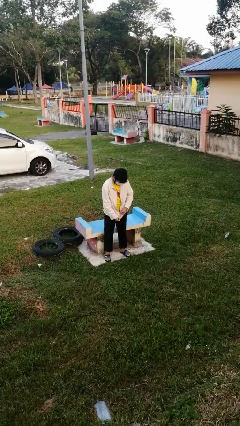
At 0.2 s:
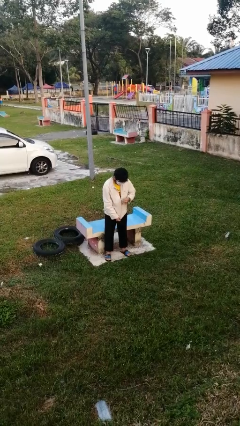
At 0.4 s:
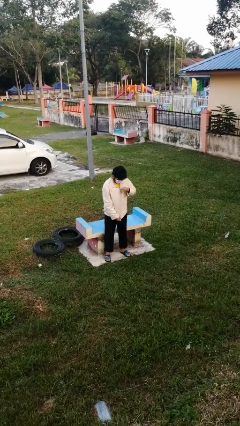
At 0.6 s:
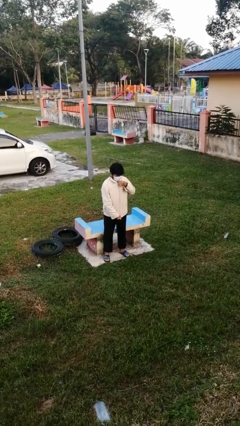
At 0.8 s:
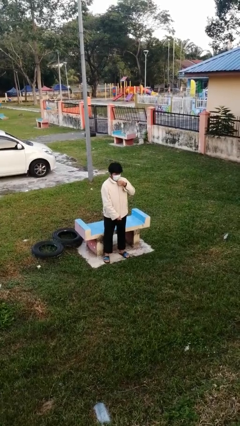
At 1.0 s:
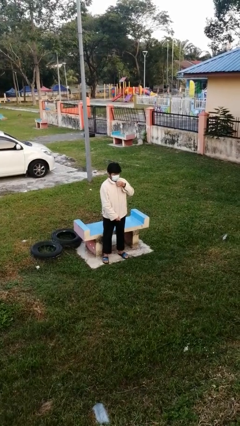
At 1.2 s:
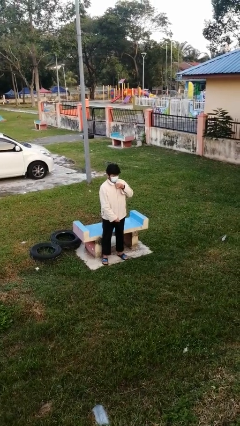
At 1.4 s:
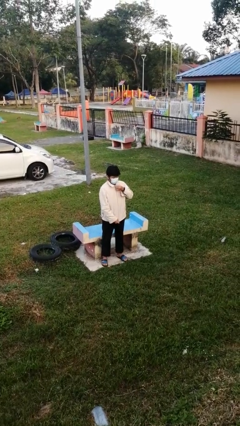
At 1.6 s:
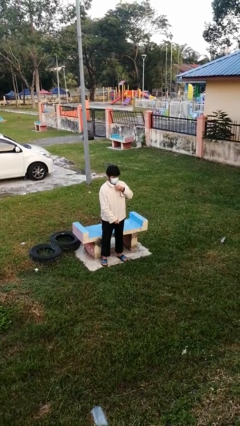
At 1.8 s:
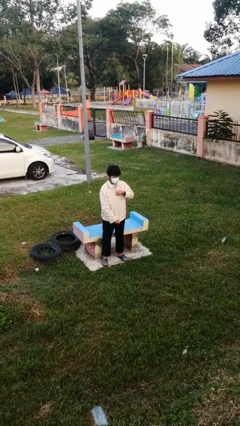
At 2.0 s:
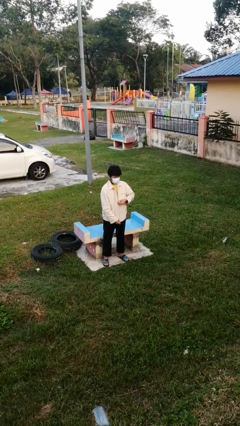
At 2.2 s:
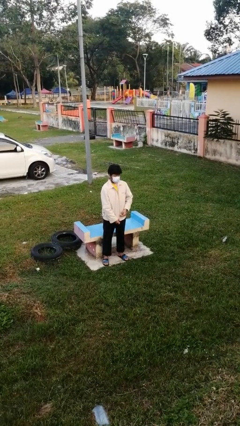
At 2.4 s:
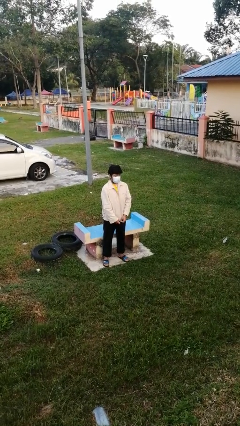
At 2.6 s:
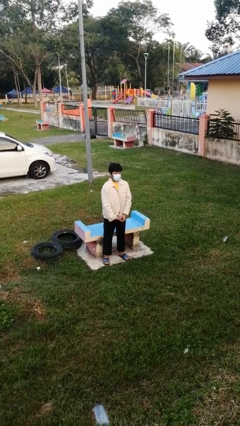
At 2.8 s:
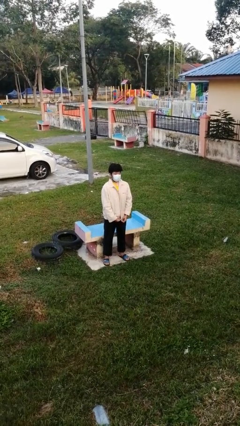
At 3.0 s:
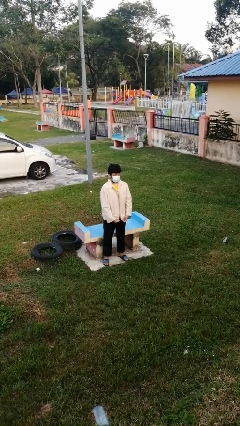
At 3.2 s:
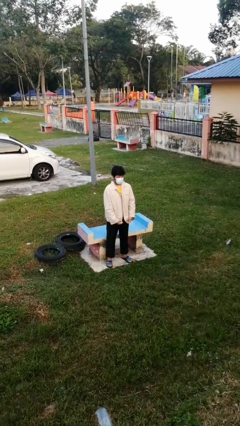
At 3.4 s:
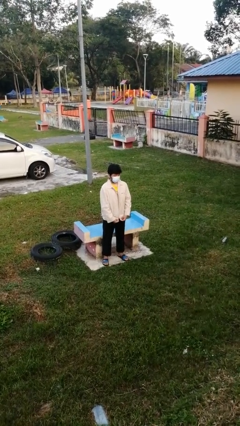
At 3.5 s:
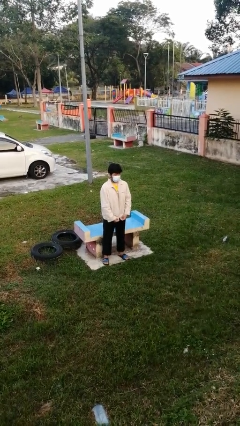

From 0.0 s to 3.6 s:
person unzips jacket

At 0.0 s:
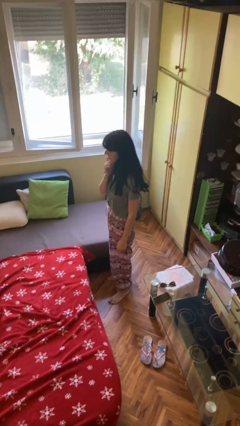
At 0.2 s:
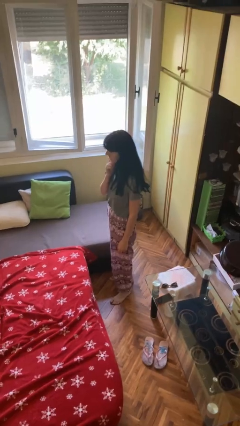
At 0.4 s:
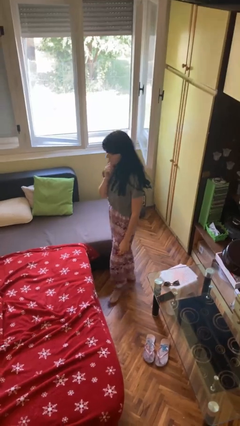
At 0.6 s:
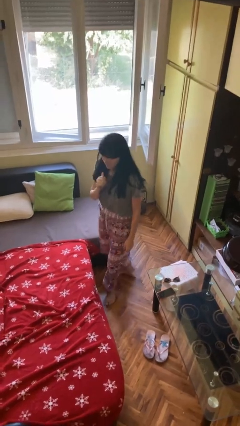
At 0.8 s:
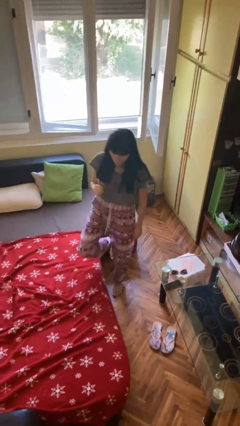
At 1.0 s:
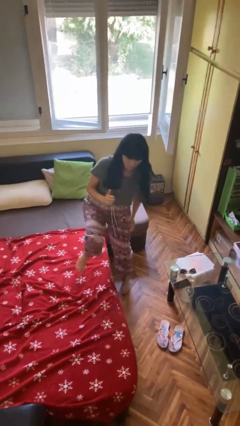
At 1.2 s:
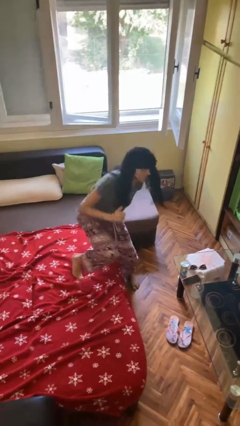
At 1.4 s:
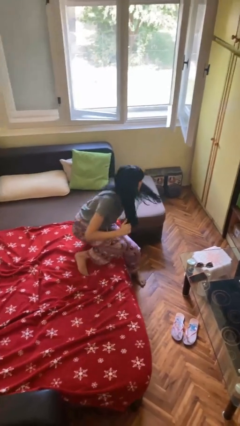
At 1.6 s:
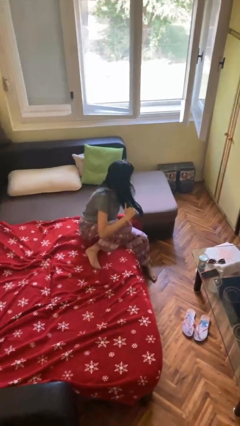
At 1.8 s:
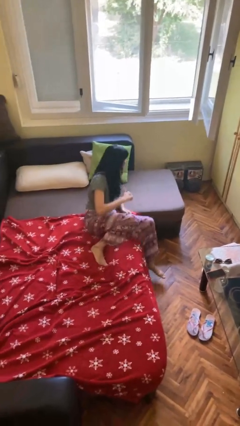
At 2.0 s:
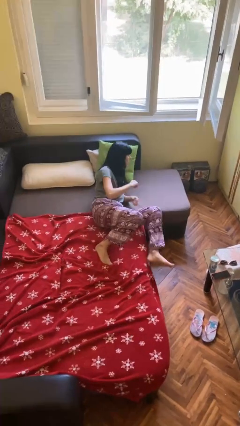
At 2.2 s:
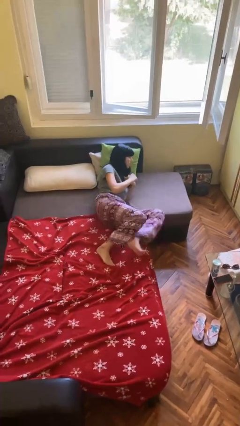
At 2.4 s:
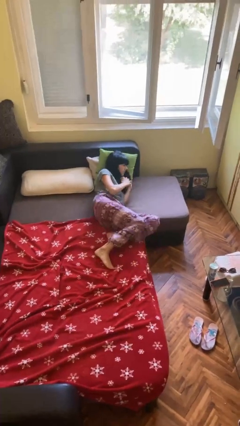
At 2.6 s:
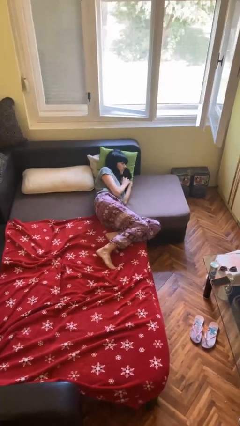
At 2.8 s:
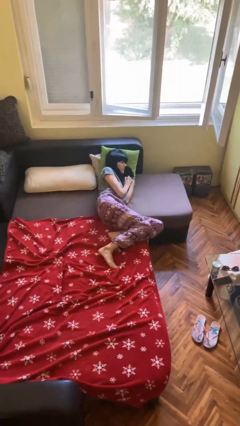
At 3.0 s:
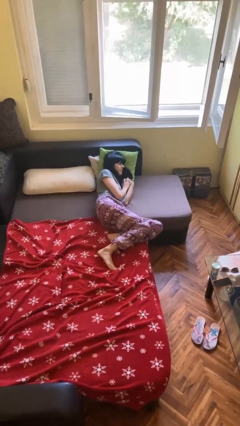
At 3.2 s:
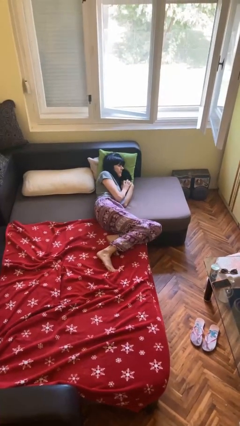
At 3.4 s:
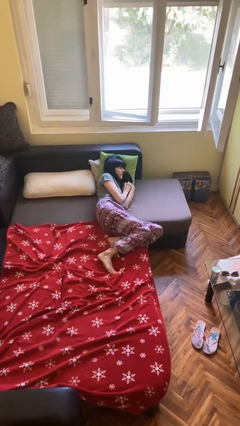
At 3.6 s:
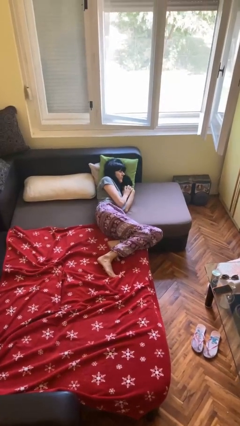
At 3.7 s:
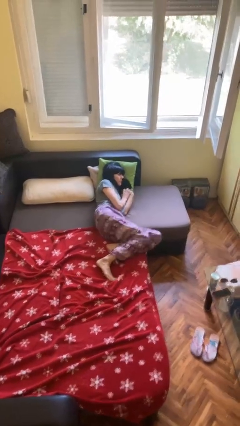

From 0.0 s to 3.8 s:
person lies down on bed

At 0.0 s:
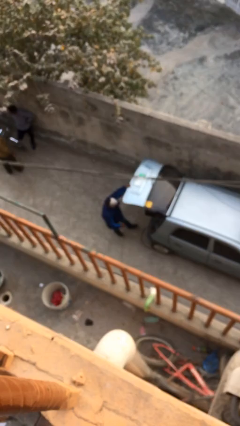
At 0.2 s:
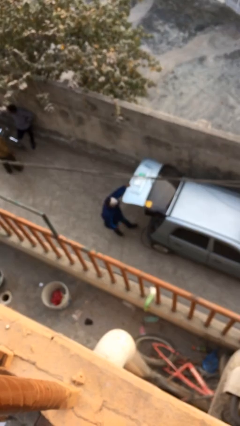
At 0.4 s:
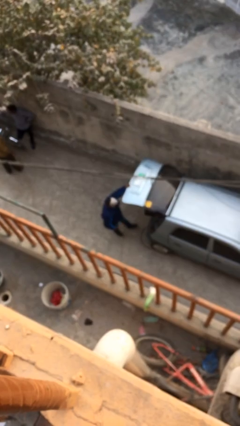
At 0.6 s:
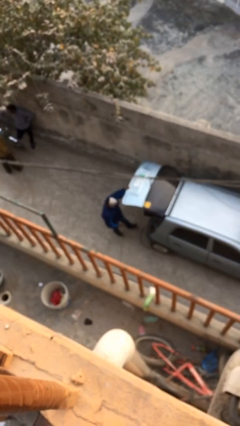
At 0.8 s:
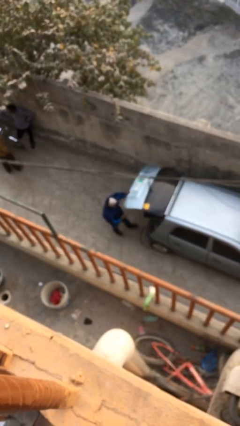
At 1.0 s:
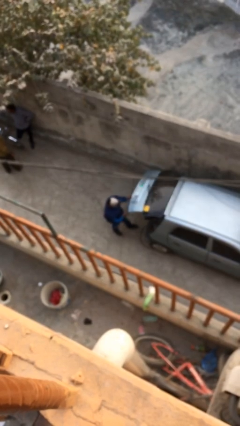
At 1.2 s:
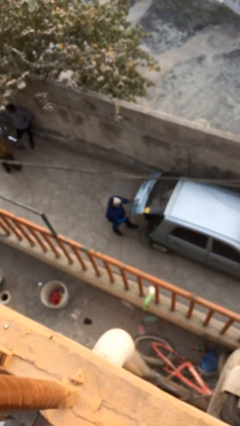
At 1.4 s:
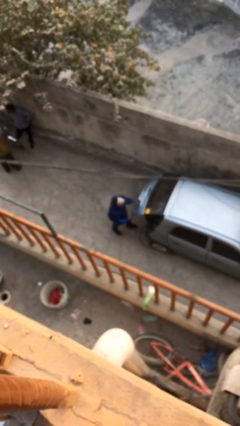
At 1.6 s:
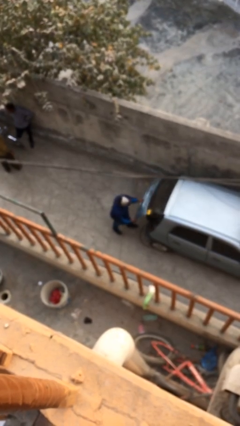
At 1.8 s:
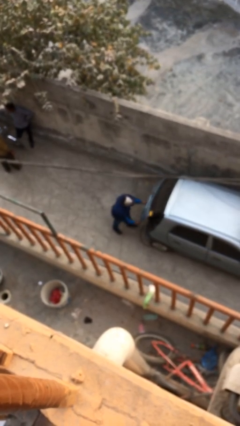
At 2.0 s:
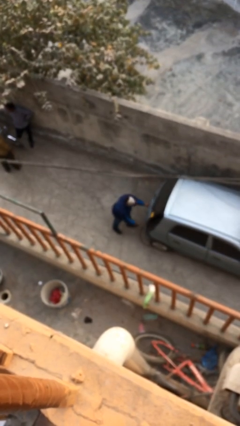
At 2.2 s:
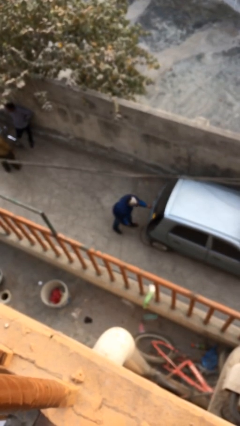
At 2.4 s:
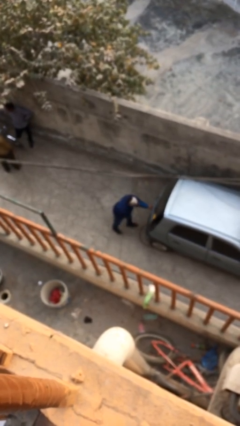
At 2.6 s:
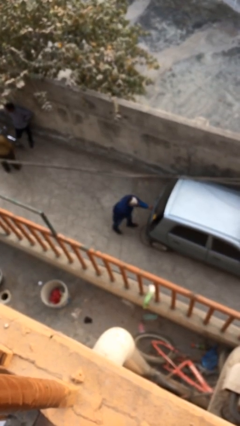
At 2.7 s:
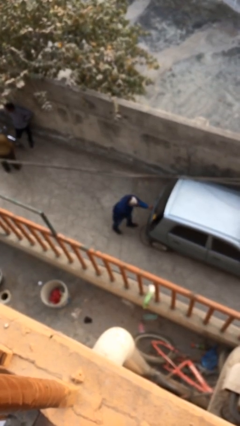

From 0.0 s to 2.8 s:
person closes car trunk

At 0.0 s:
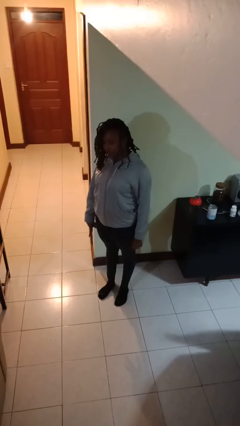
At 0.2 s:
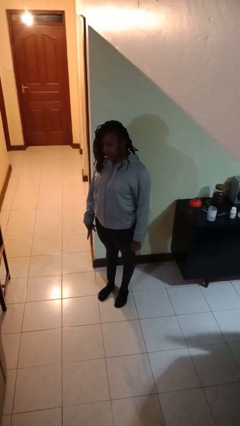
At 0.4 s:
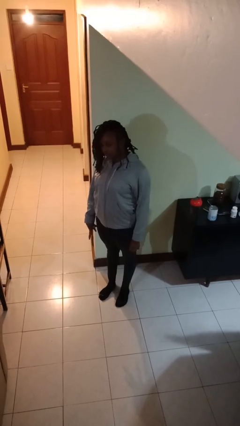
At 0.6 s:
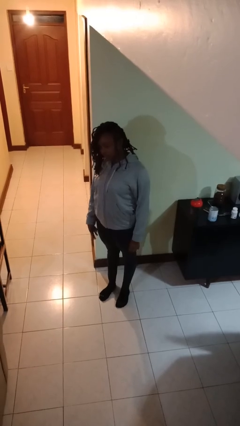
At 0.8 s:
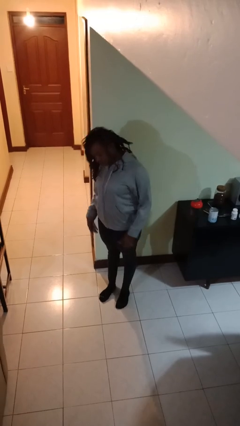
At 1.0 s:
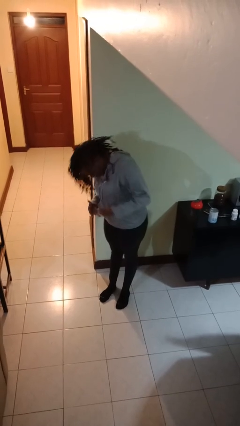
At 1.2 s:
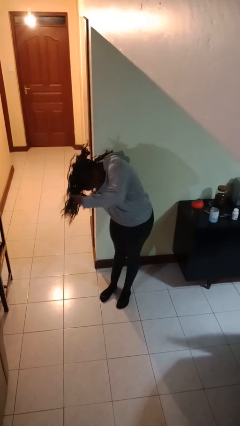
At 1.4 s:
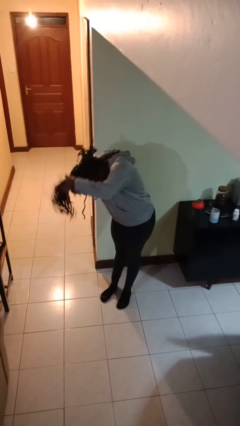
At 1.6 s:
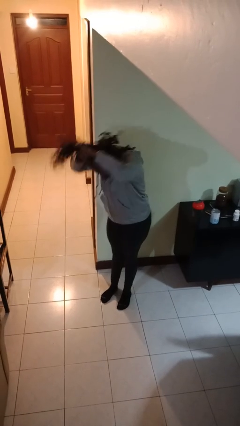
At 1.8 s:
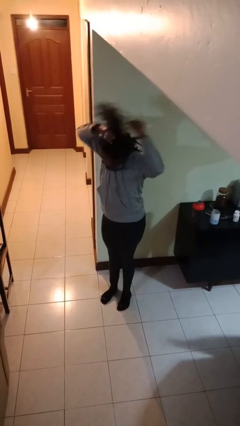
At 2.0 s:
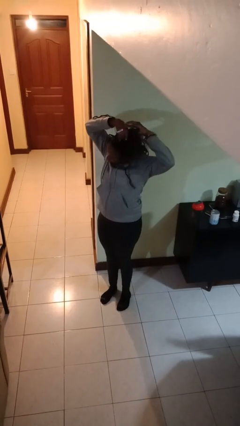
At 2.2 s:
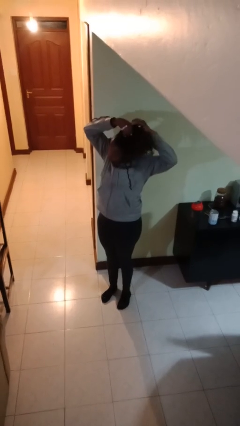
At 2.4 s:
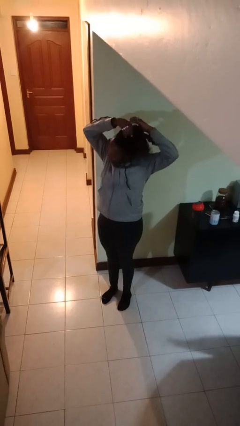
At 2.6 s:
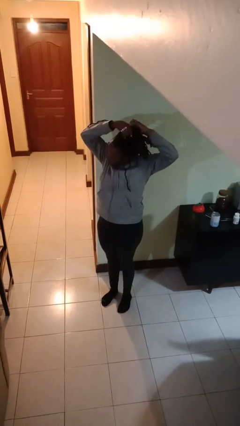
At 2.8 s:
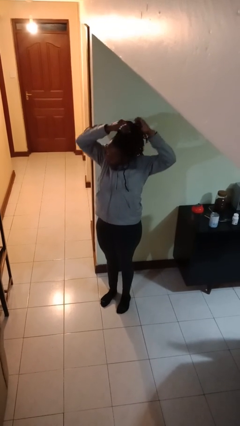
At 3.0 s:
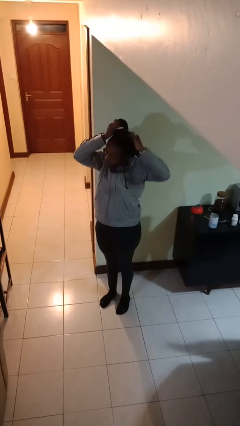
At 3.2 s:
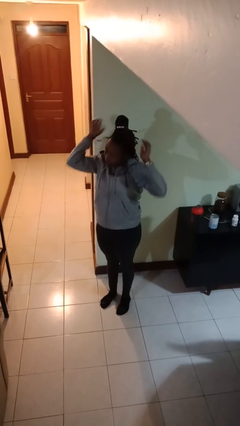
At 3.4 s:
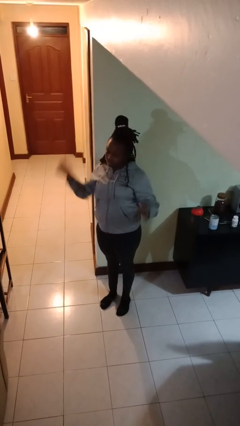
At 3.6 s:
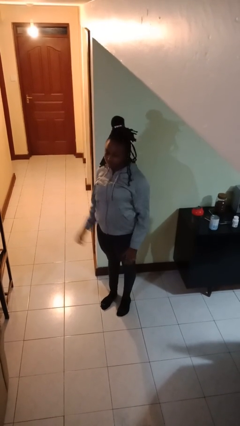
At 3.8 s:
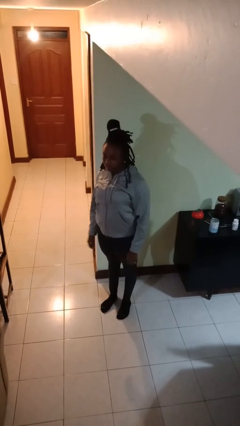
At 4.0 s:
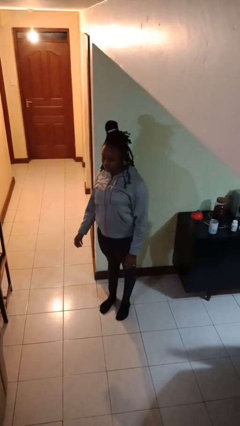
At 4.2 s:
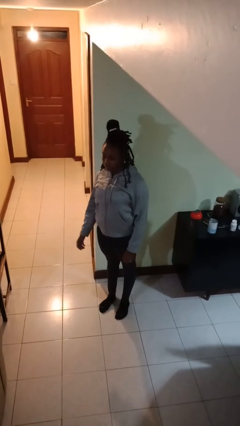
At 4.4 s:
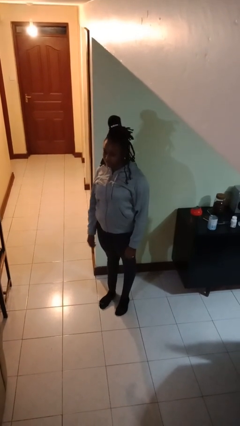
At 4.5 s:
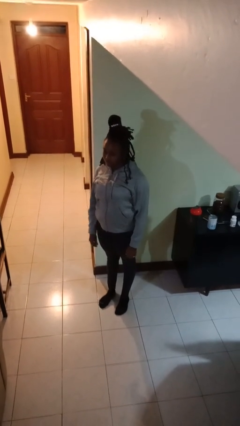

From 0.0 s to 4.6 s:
person puts hair in ponytail

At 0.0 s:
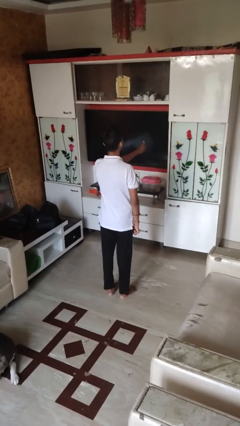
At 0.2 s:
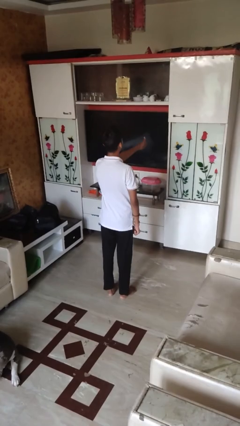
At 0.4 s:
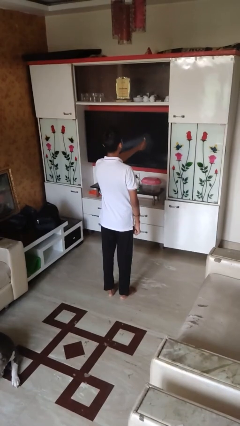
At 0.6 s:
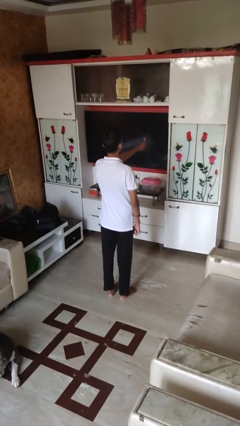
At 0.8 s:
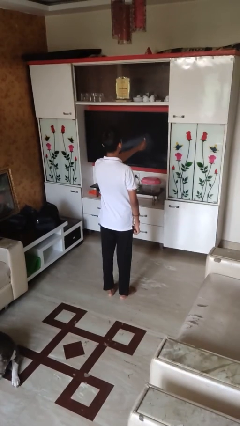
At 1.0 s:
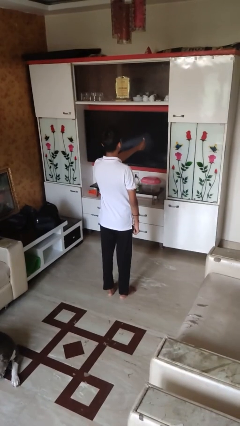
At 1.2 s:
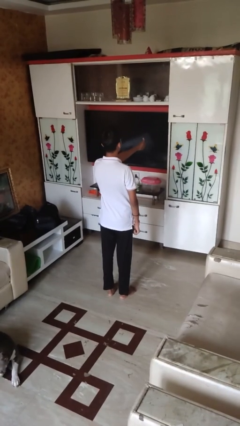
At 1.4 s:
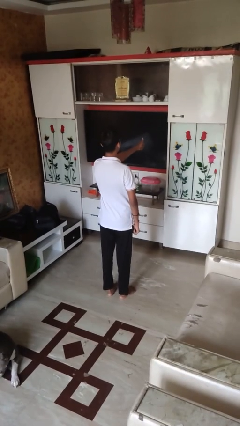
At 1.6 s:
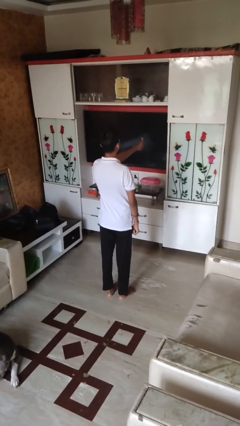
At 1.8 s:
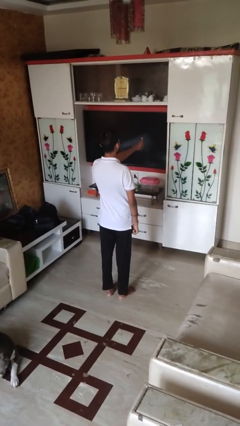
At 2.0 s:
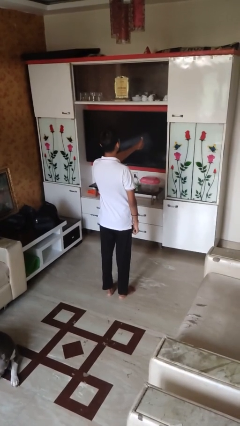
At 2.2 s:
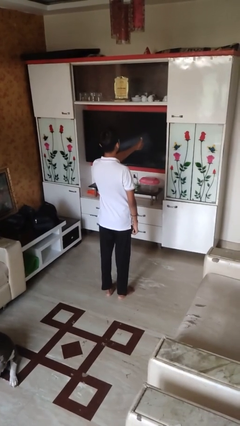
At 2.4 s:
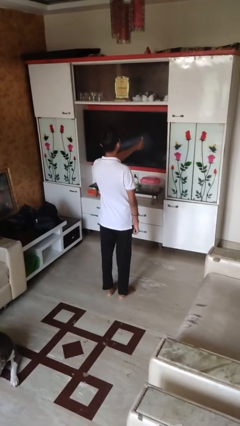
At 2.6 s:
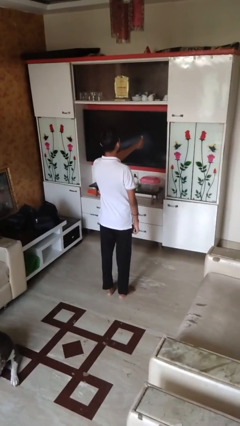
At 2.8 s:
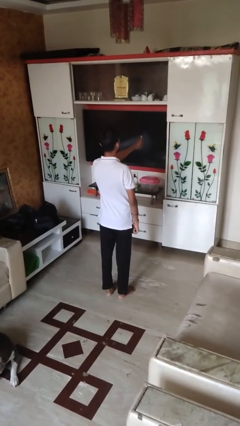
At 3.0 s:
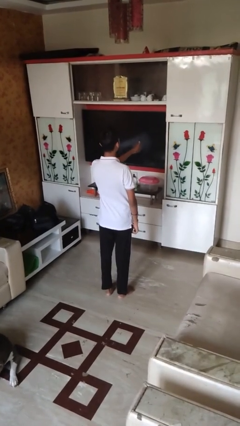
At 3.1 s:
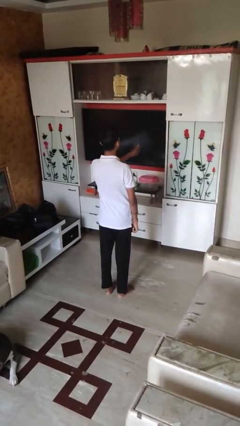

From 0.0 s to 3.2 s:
person gestures thumbs up
